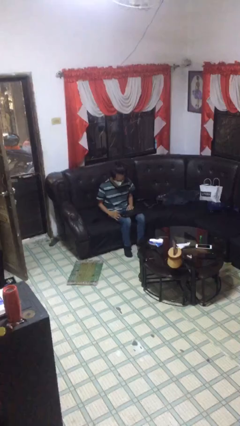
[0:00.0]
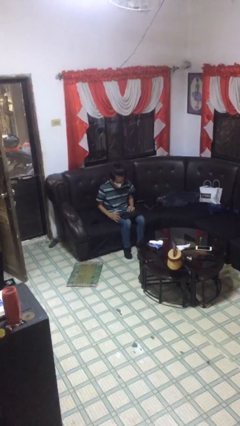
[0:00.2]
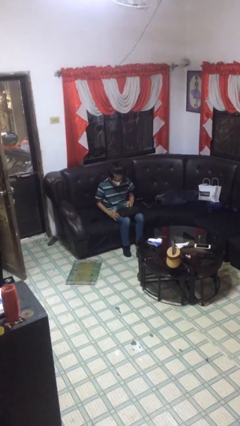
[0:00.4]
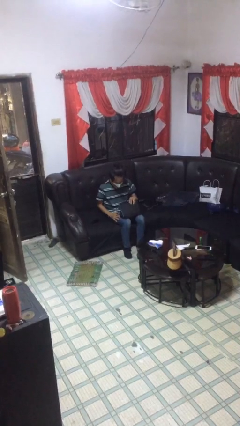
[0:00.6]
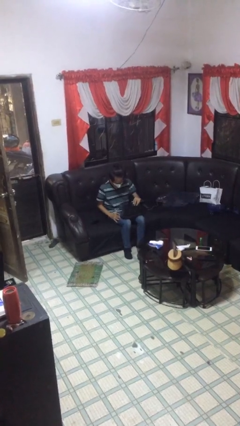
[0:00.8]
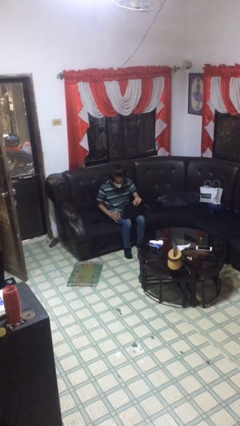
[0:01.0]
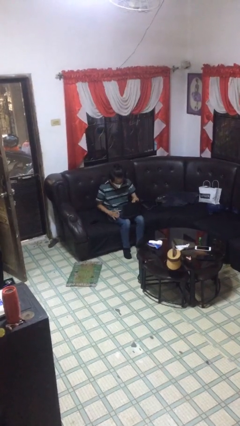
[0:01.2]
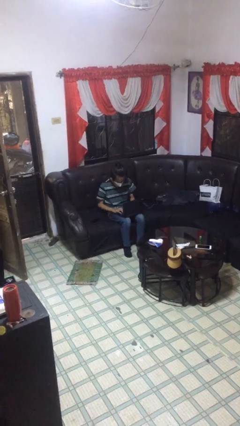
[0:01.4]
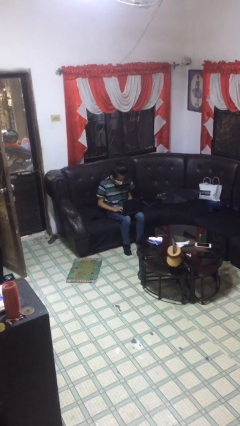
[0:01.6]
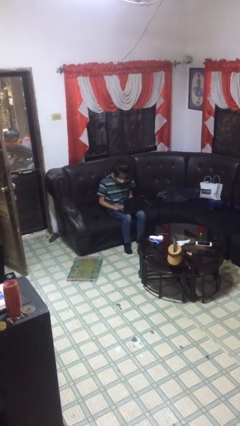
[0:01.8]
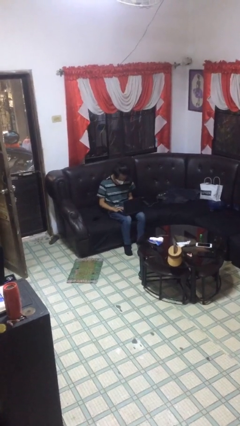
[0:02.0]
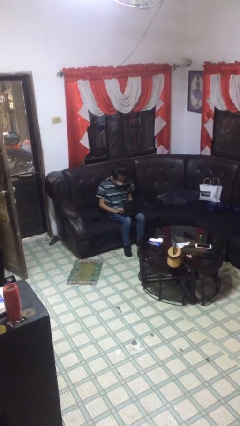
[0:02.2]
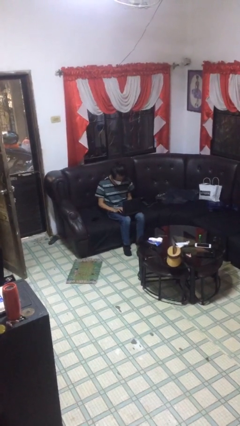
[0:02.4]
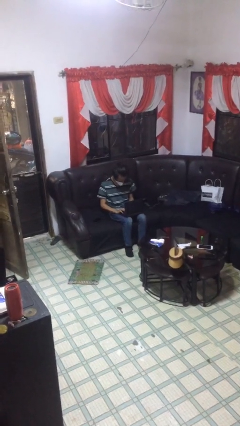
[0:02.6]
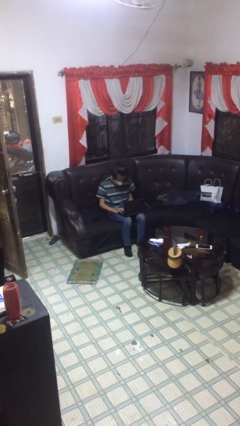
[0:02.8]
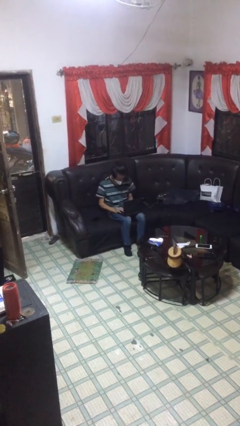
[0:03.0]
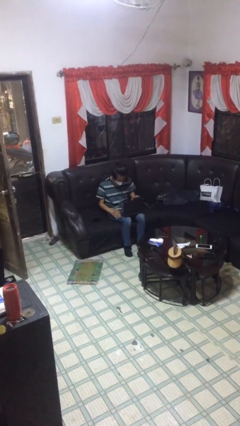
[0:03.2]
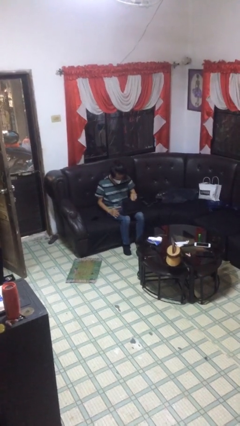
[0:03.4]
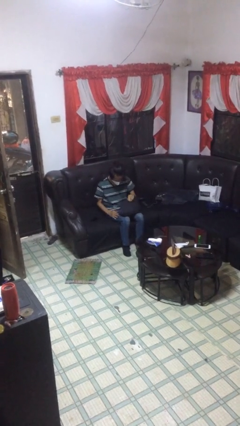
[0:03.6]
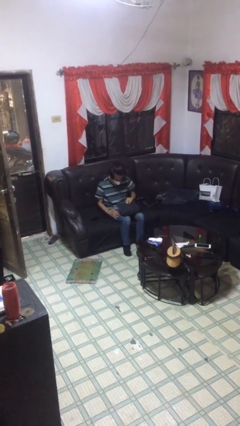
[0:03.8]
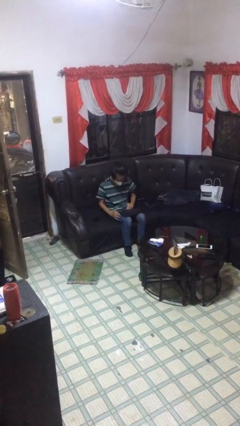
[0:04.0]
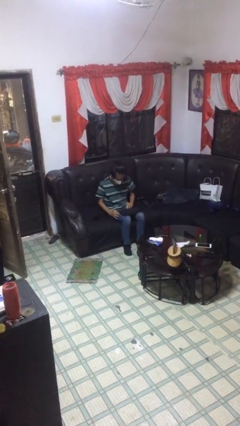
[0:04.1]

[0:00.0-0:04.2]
person interacts with laptop

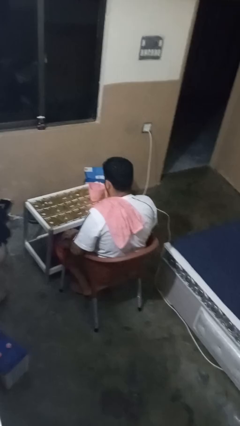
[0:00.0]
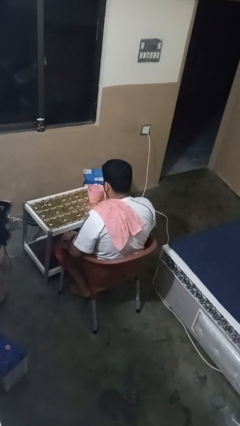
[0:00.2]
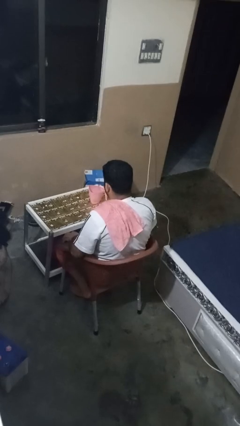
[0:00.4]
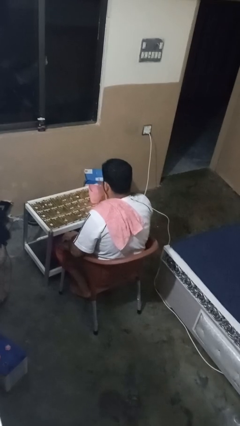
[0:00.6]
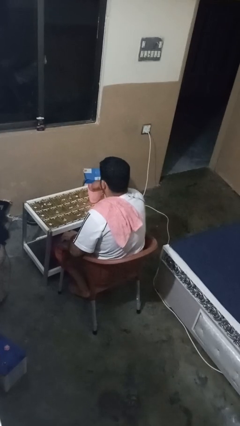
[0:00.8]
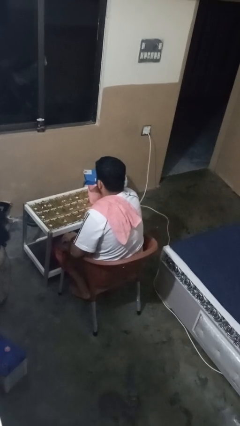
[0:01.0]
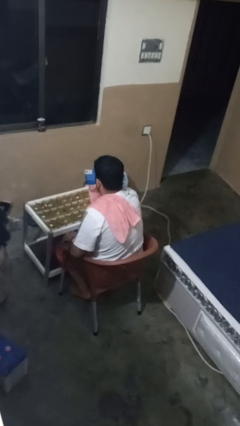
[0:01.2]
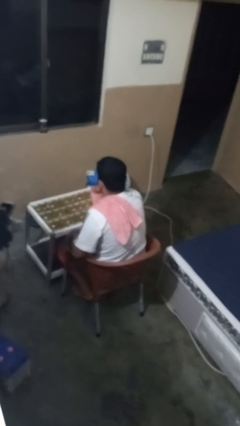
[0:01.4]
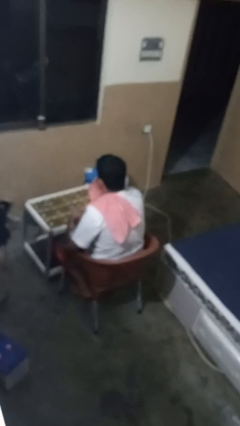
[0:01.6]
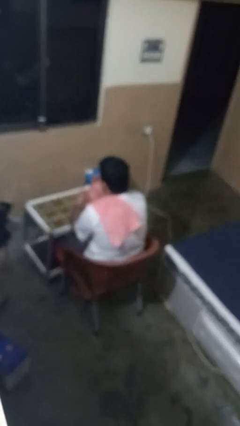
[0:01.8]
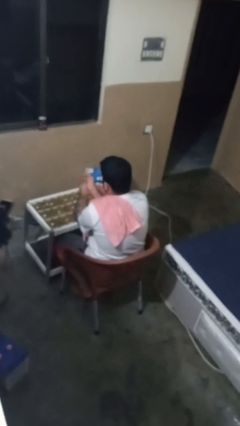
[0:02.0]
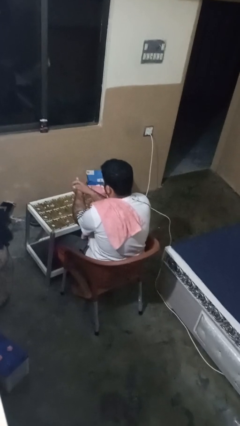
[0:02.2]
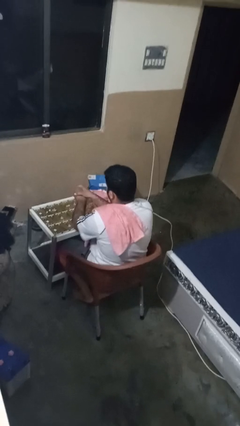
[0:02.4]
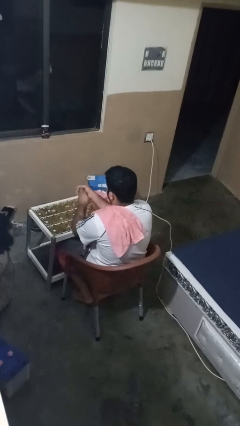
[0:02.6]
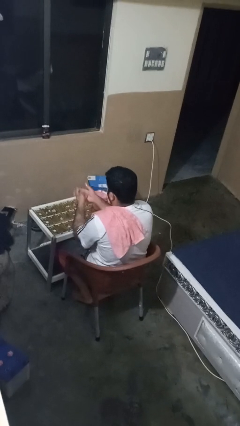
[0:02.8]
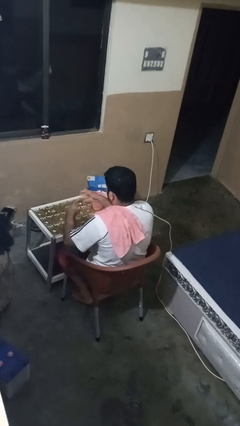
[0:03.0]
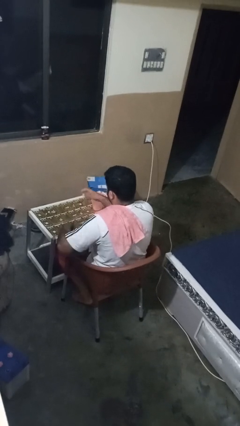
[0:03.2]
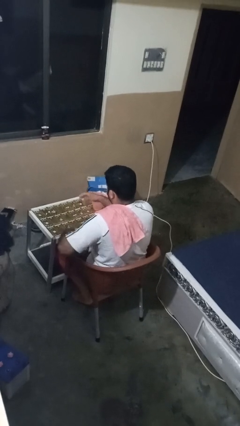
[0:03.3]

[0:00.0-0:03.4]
person washes hands

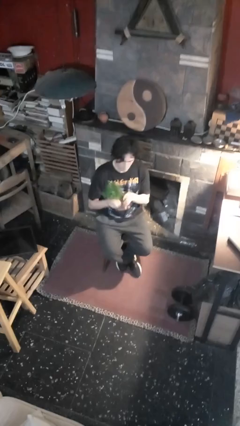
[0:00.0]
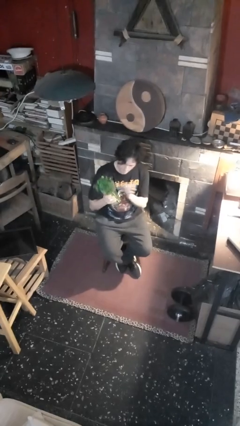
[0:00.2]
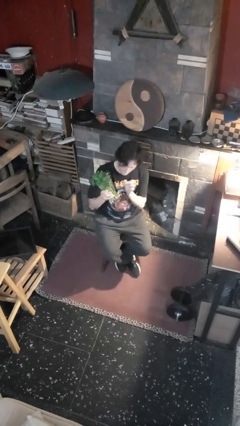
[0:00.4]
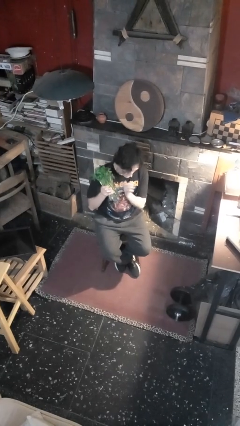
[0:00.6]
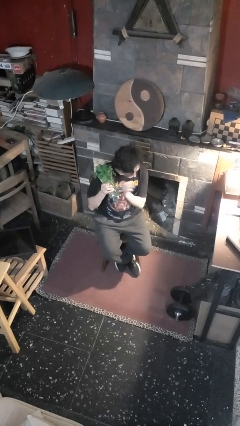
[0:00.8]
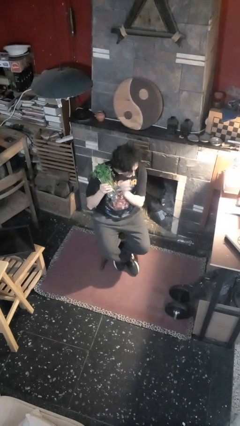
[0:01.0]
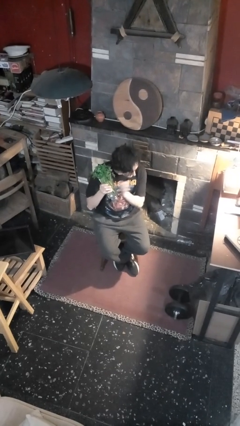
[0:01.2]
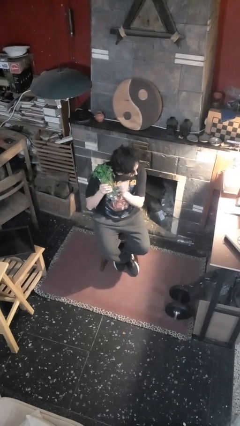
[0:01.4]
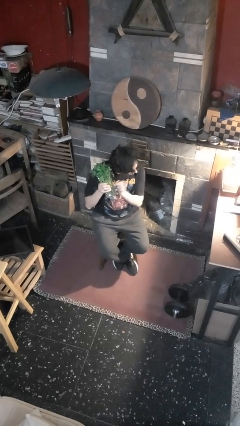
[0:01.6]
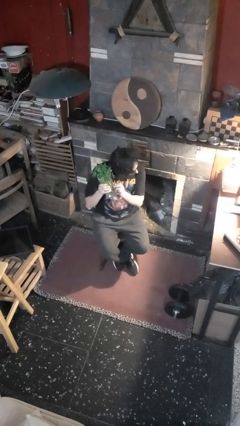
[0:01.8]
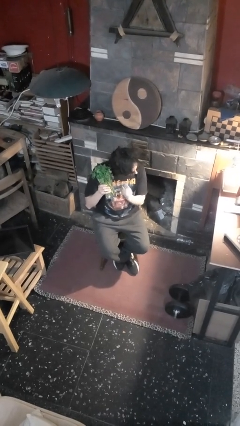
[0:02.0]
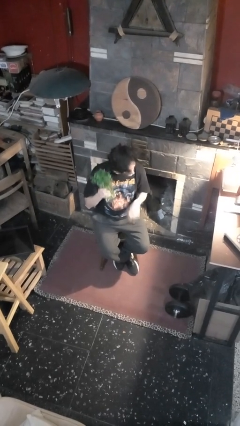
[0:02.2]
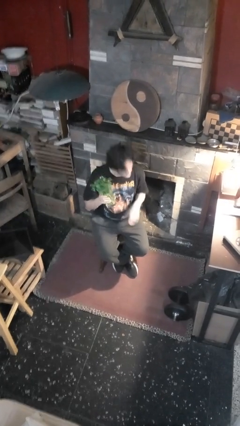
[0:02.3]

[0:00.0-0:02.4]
person taps object with finger

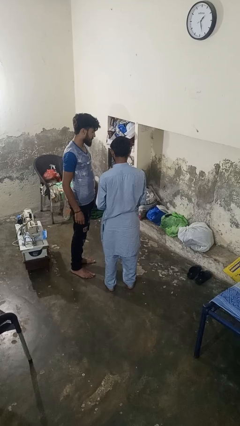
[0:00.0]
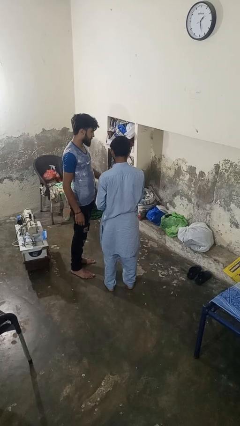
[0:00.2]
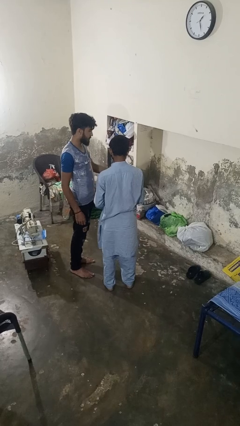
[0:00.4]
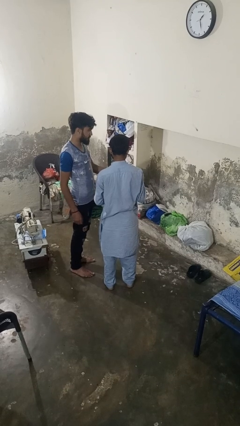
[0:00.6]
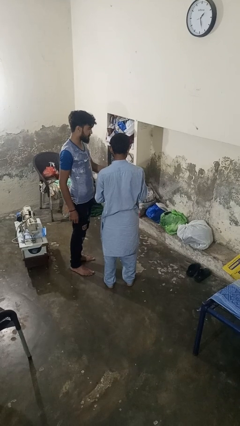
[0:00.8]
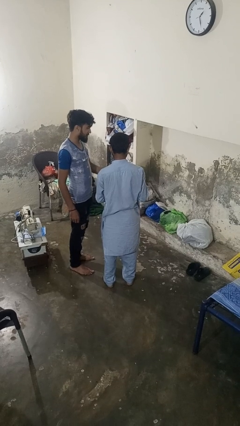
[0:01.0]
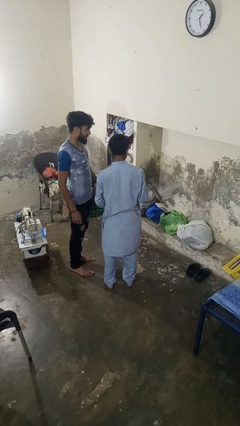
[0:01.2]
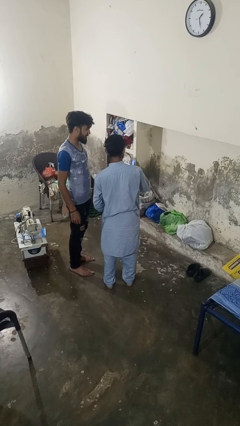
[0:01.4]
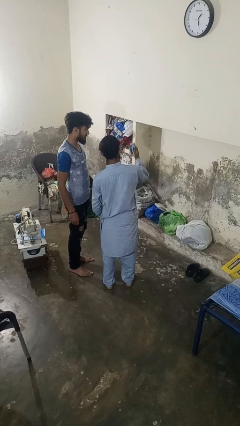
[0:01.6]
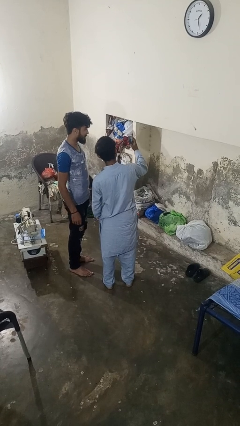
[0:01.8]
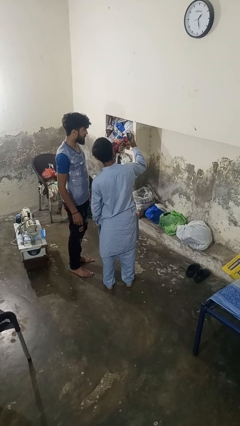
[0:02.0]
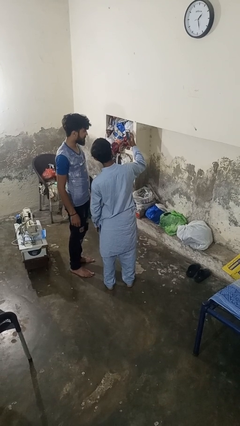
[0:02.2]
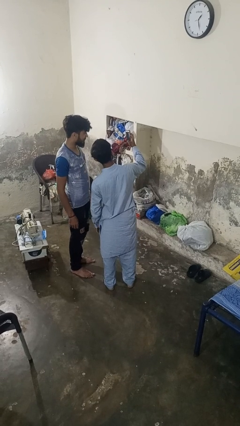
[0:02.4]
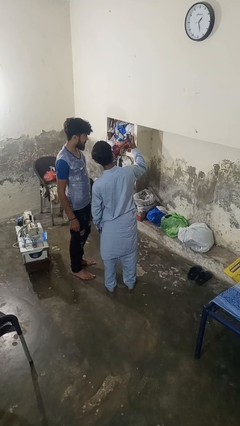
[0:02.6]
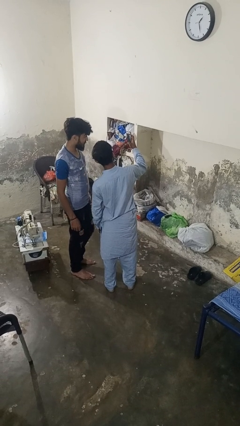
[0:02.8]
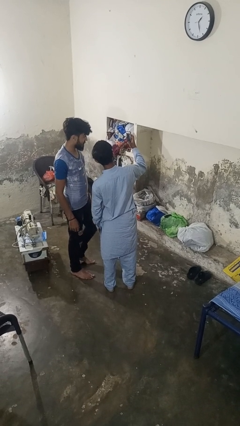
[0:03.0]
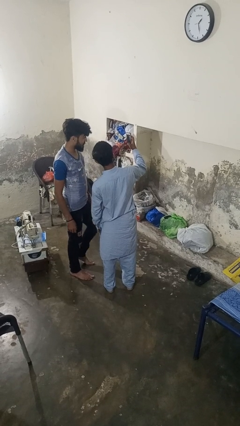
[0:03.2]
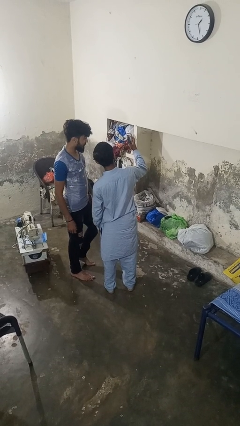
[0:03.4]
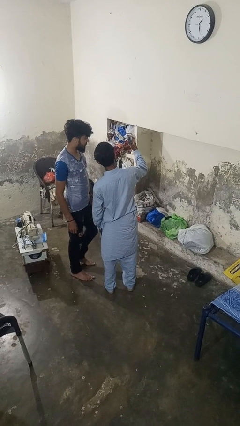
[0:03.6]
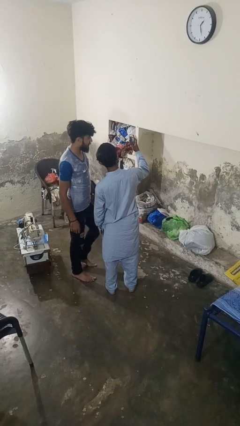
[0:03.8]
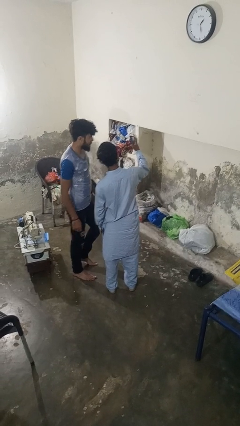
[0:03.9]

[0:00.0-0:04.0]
person takes selfie with person

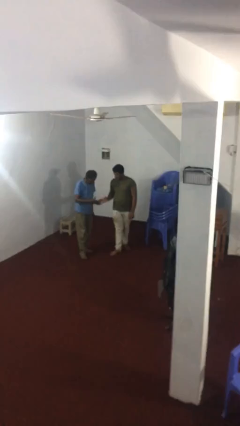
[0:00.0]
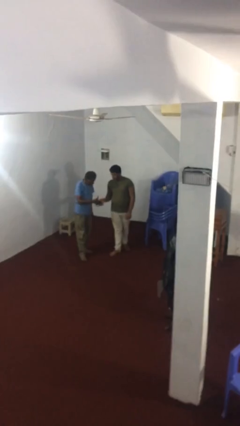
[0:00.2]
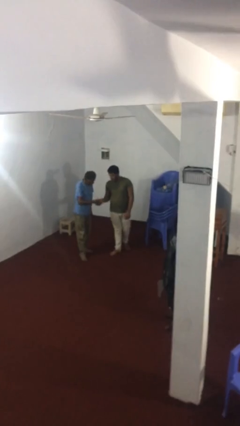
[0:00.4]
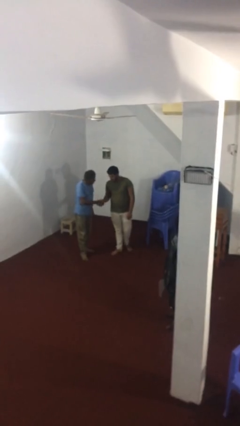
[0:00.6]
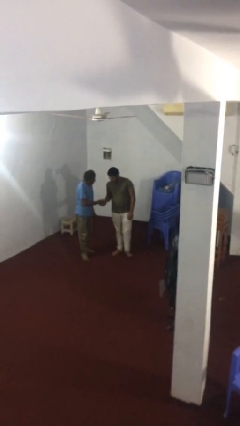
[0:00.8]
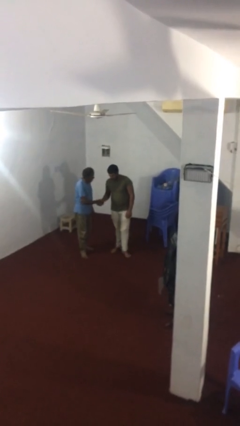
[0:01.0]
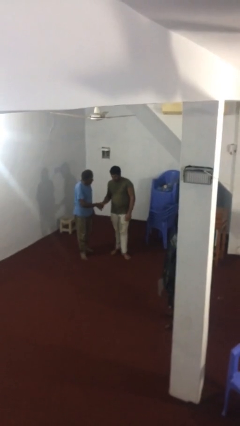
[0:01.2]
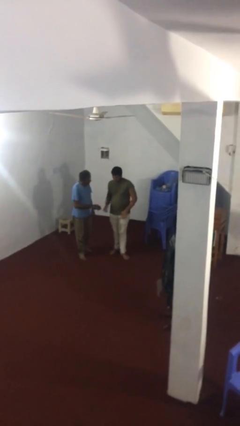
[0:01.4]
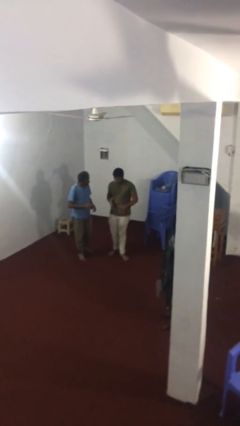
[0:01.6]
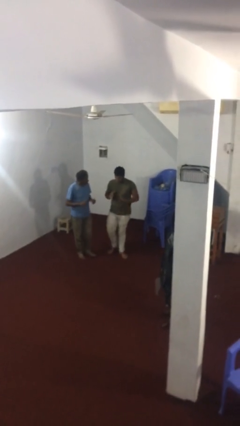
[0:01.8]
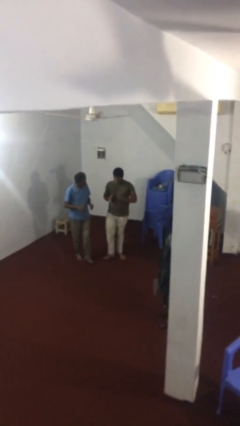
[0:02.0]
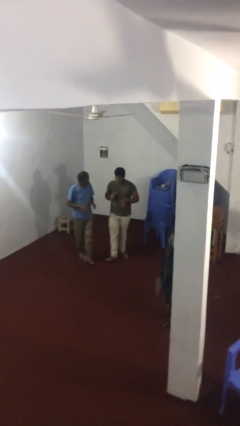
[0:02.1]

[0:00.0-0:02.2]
person shakes hand

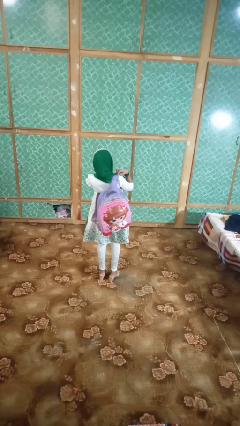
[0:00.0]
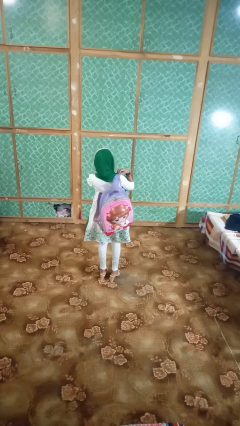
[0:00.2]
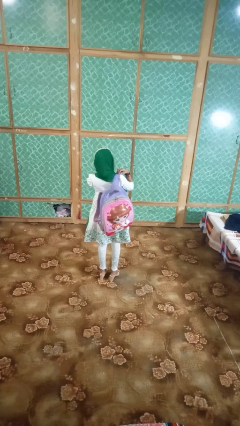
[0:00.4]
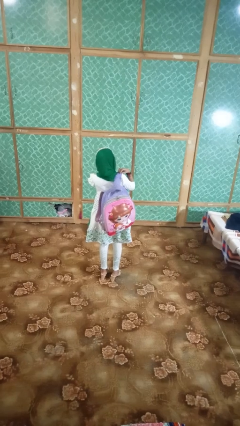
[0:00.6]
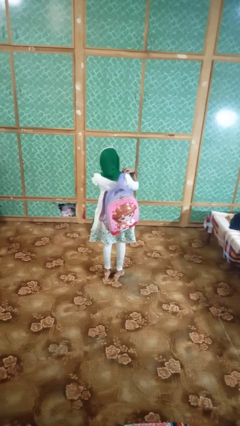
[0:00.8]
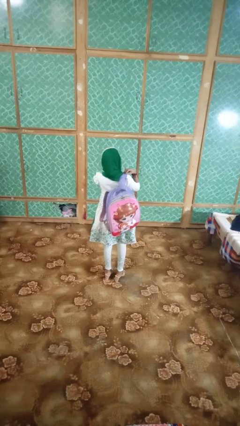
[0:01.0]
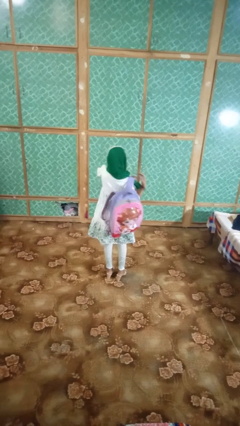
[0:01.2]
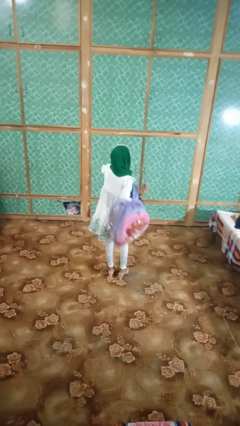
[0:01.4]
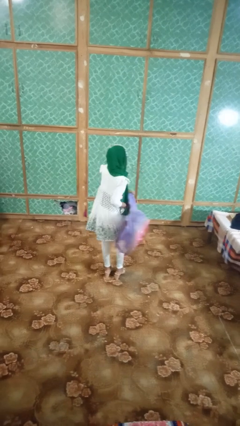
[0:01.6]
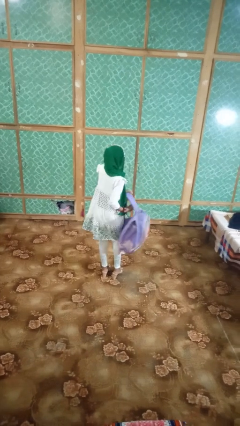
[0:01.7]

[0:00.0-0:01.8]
person puts on backpack
